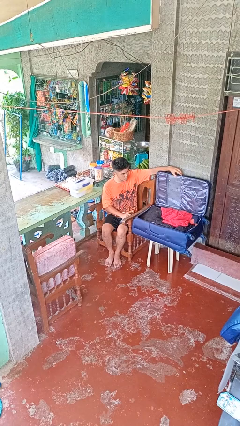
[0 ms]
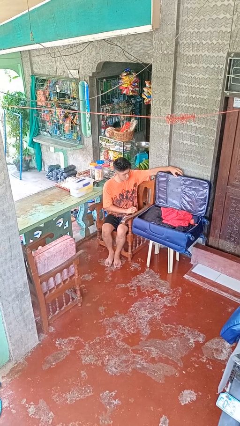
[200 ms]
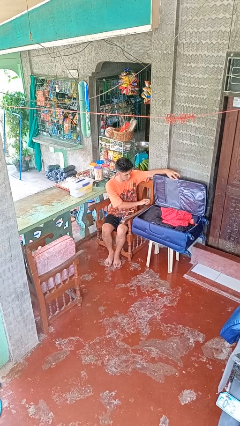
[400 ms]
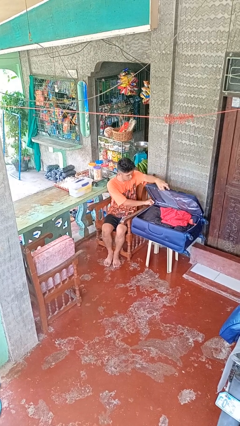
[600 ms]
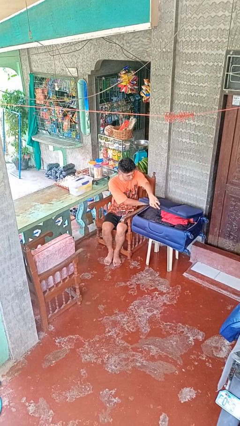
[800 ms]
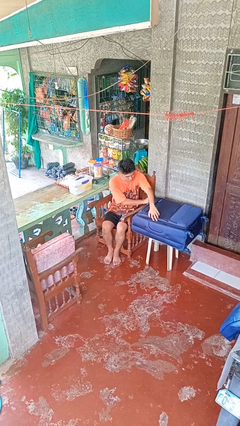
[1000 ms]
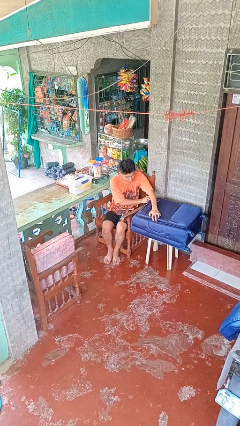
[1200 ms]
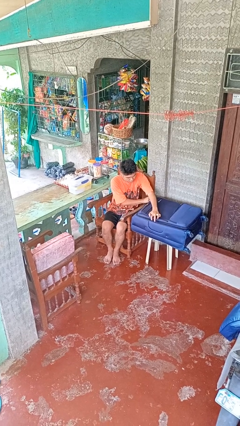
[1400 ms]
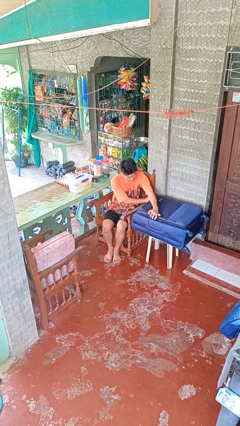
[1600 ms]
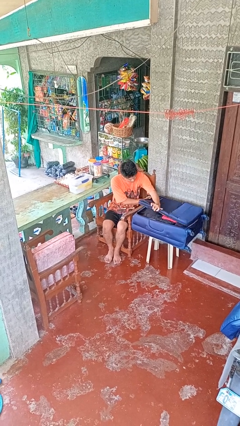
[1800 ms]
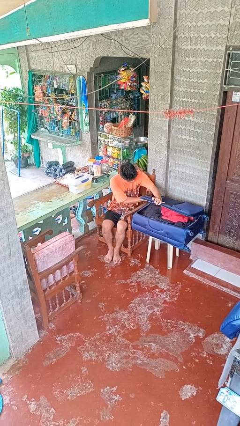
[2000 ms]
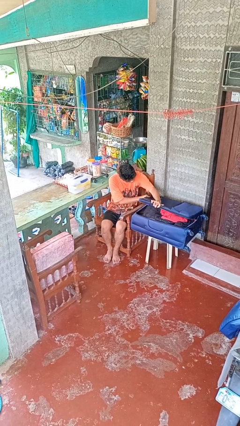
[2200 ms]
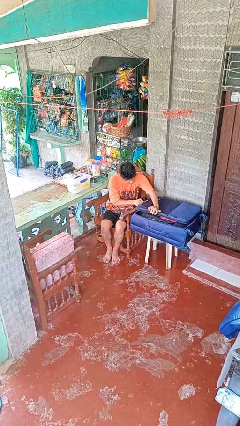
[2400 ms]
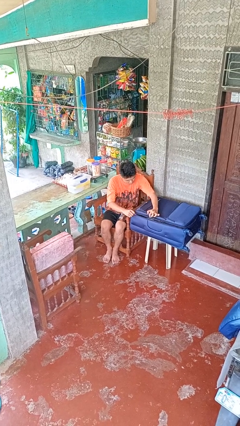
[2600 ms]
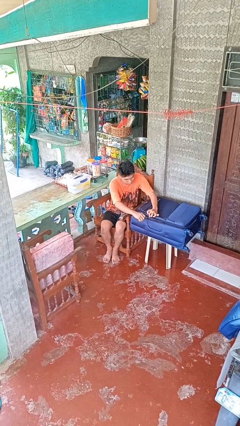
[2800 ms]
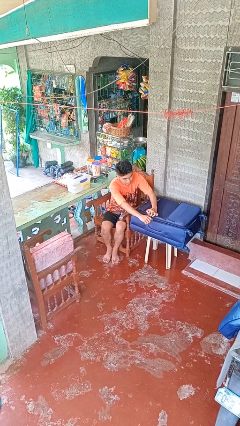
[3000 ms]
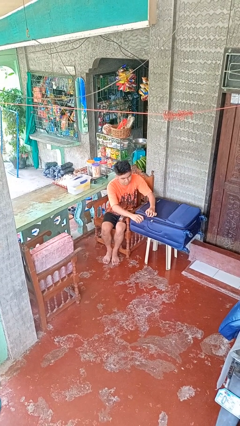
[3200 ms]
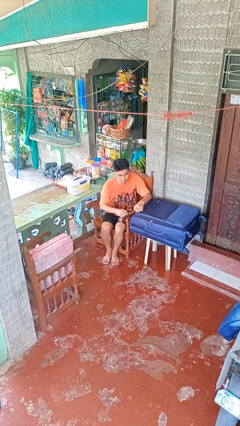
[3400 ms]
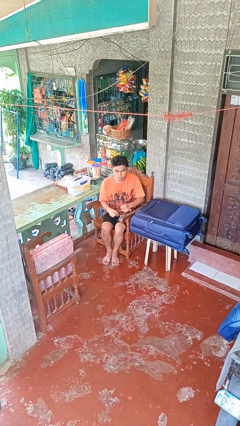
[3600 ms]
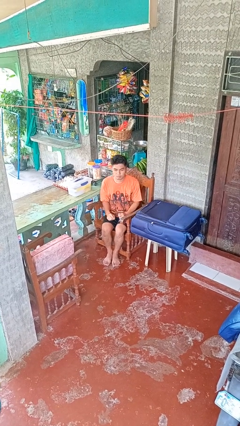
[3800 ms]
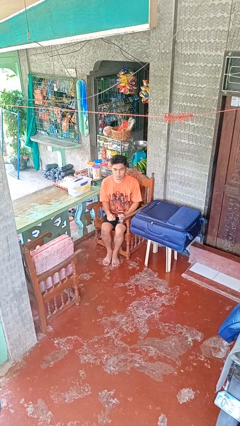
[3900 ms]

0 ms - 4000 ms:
person closes suitcase

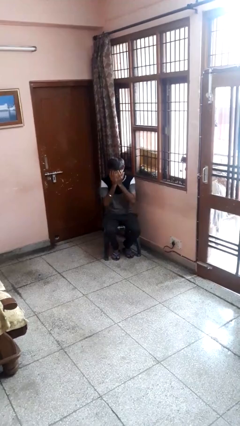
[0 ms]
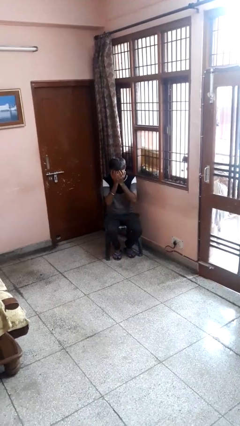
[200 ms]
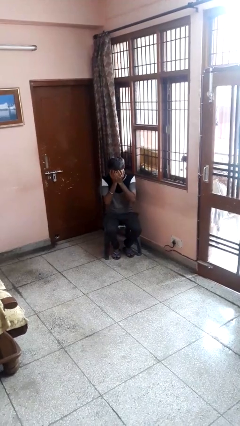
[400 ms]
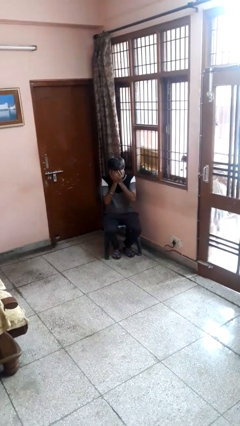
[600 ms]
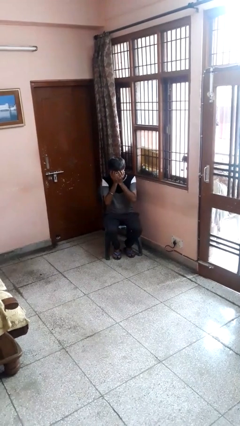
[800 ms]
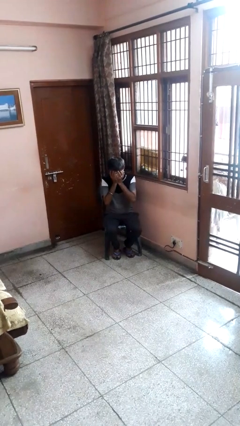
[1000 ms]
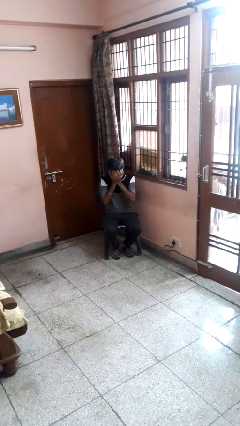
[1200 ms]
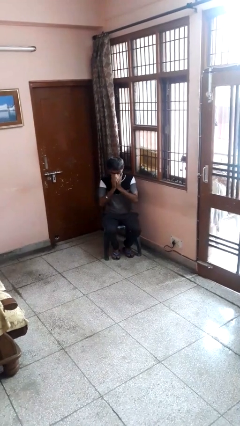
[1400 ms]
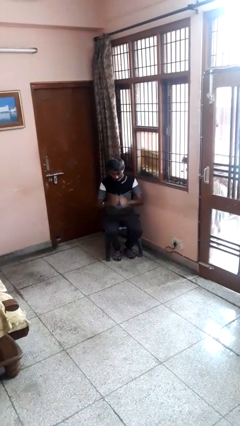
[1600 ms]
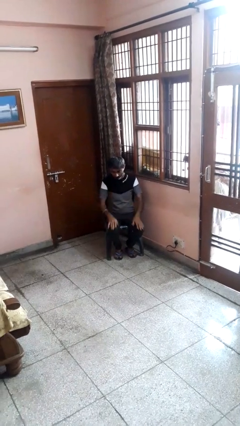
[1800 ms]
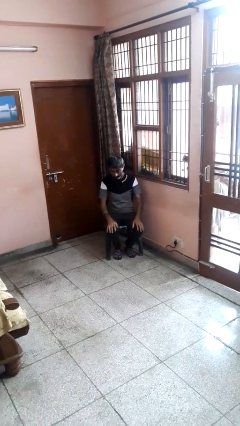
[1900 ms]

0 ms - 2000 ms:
person covers face with hands

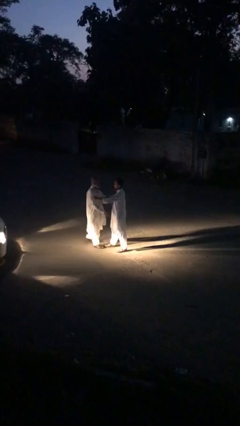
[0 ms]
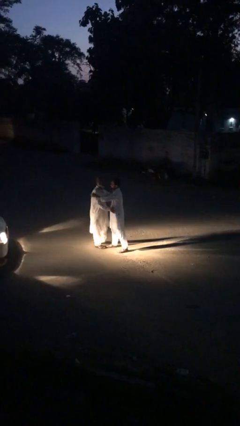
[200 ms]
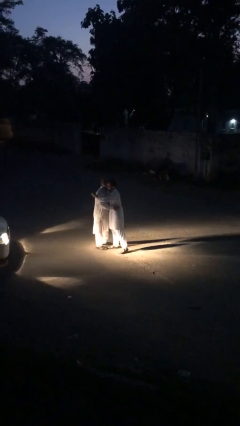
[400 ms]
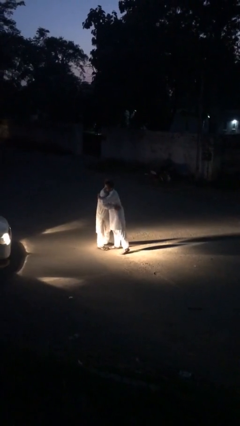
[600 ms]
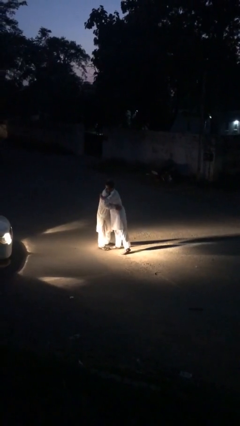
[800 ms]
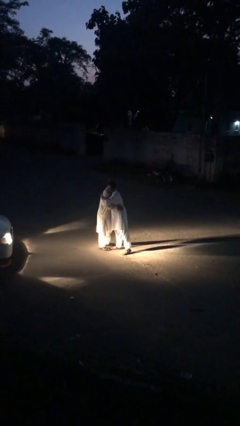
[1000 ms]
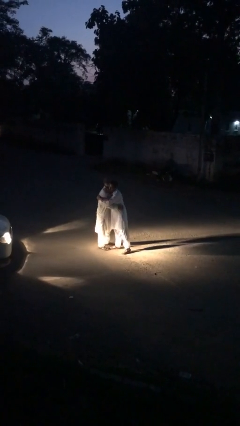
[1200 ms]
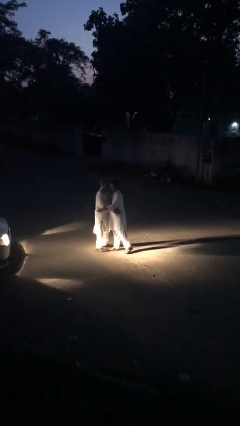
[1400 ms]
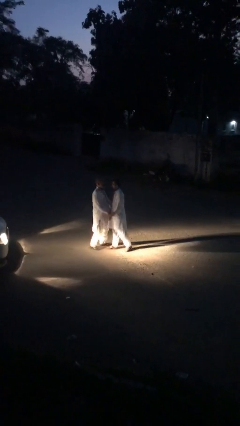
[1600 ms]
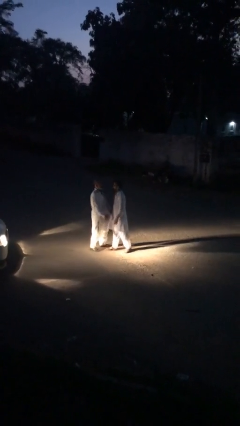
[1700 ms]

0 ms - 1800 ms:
person embraces person

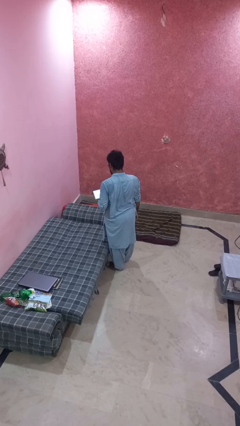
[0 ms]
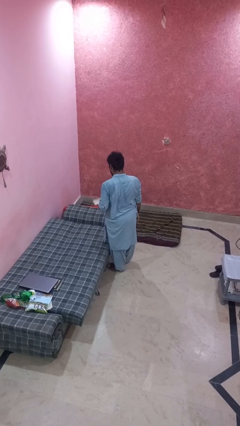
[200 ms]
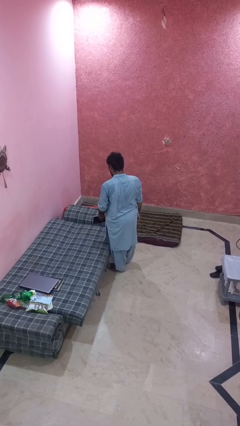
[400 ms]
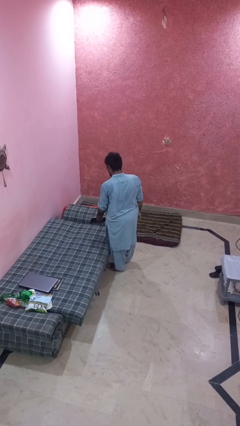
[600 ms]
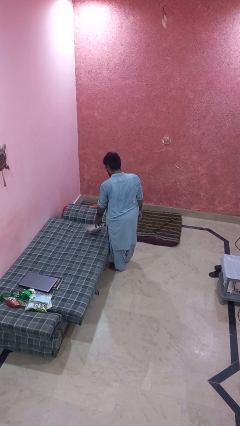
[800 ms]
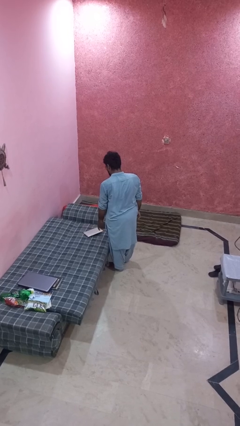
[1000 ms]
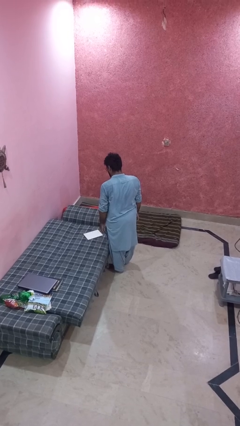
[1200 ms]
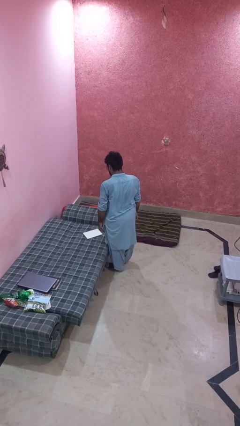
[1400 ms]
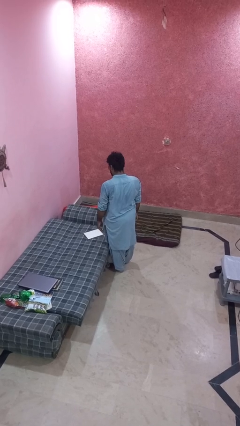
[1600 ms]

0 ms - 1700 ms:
person puts down object on bed

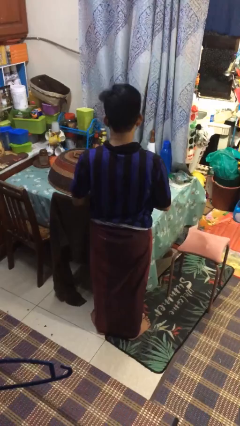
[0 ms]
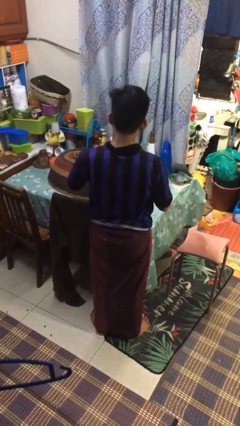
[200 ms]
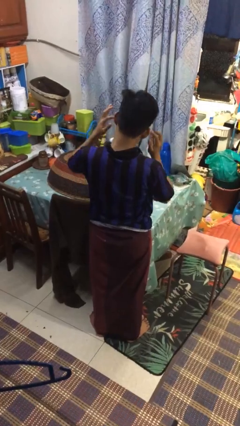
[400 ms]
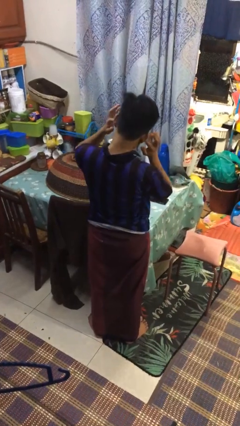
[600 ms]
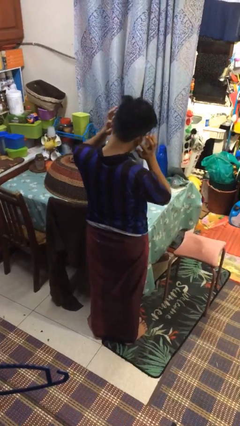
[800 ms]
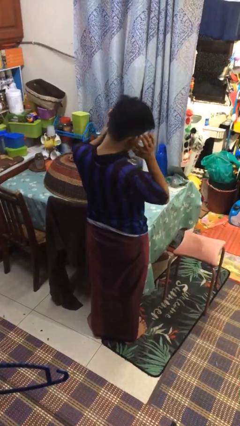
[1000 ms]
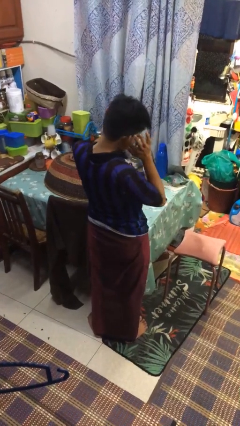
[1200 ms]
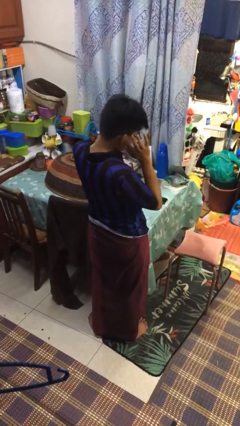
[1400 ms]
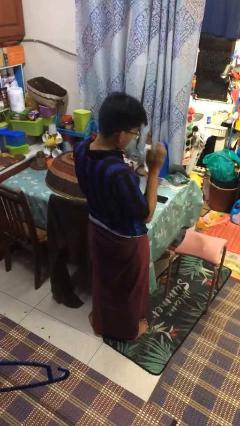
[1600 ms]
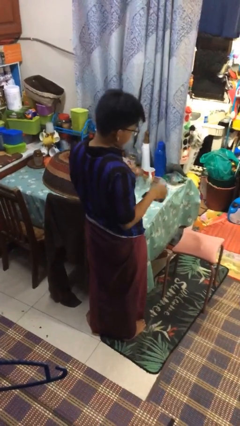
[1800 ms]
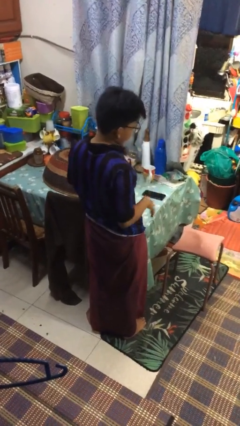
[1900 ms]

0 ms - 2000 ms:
person puts fingers in ear

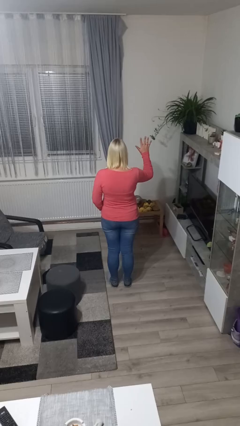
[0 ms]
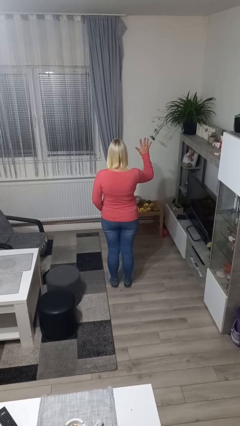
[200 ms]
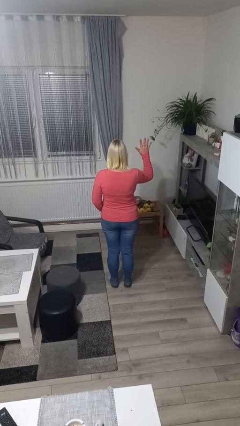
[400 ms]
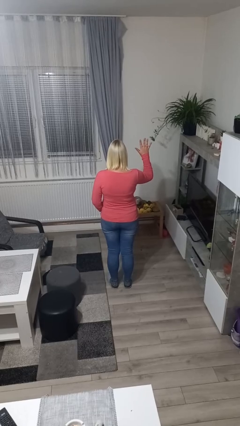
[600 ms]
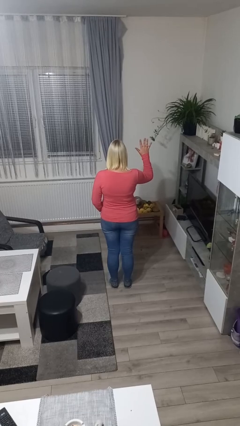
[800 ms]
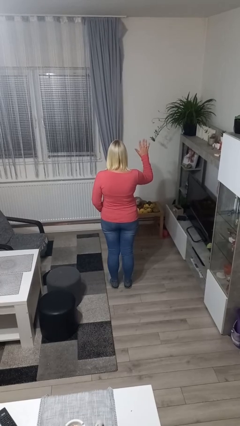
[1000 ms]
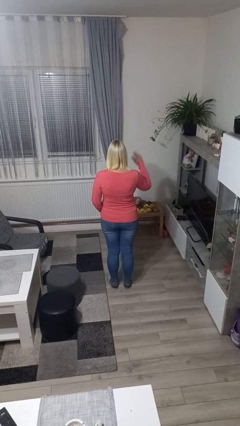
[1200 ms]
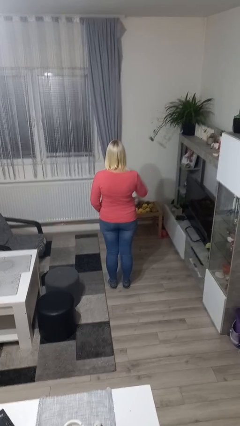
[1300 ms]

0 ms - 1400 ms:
person gestures number five

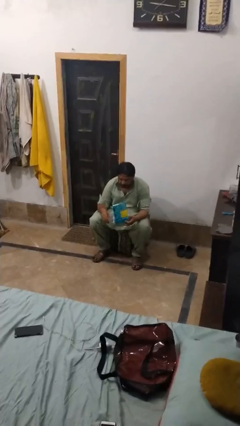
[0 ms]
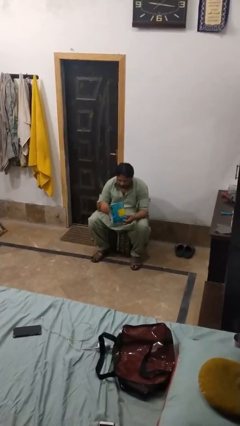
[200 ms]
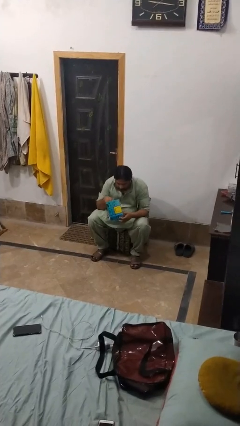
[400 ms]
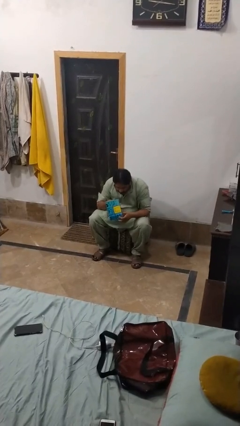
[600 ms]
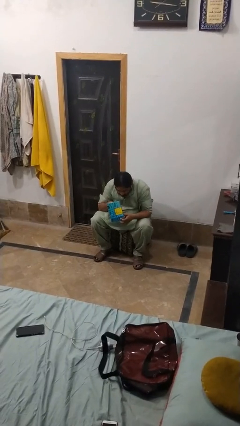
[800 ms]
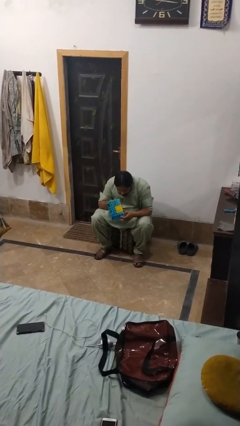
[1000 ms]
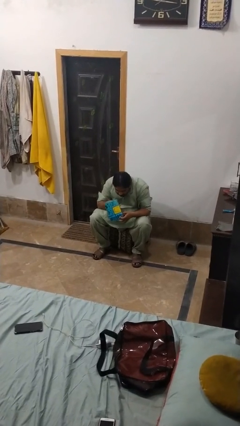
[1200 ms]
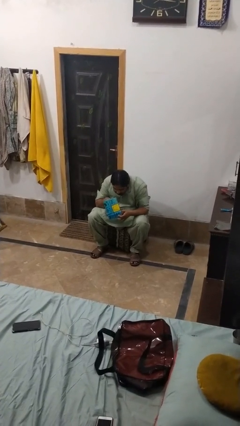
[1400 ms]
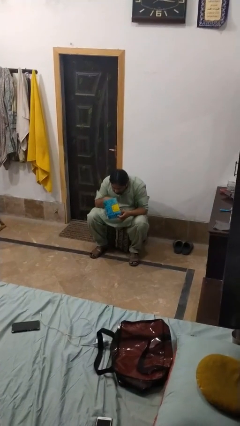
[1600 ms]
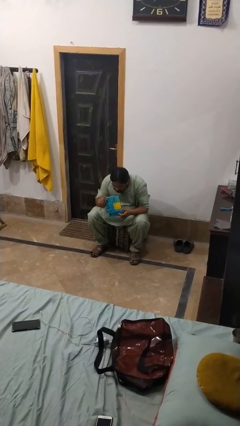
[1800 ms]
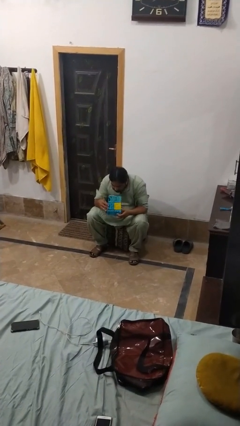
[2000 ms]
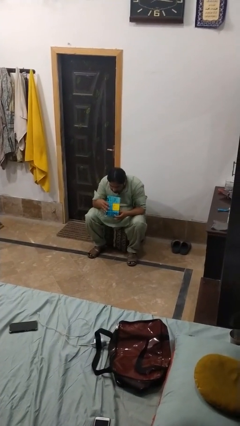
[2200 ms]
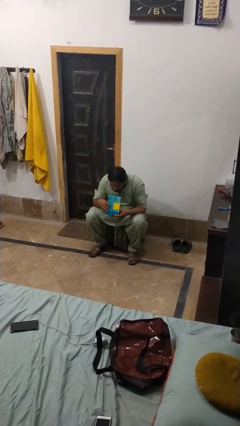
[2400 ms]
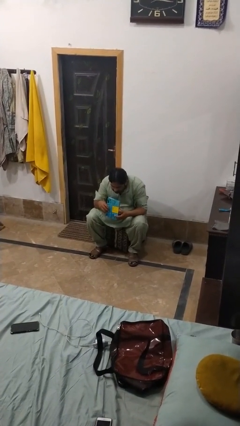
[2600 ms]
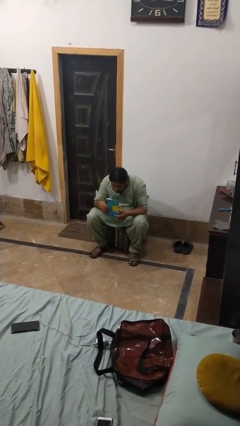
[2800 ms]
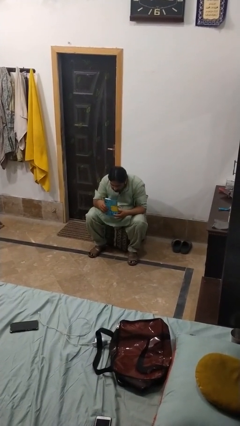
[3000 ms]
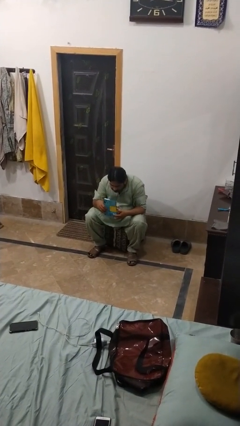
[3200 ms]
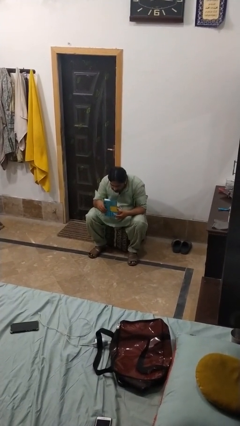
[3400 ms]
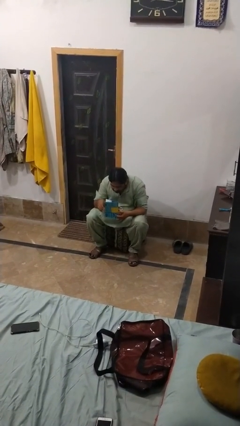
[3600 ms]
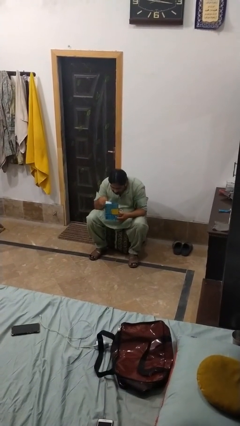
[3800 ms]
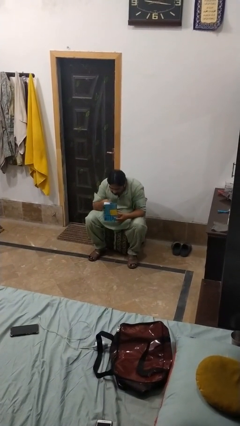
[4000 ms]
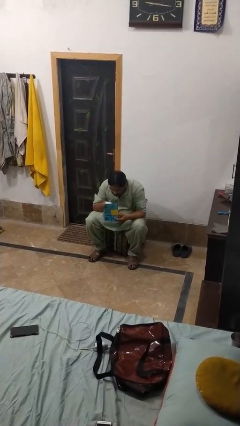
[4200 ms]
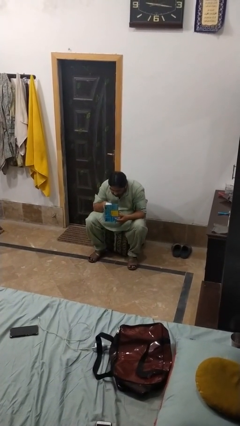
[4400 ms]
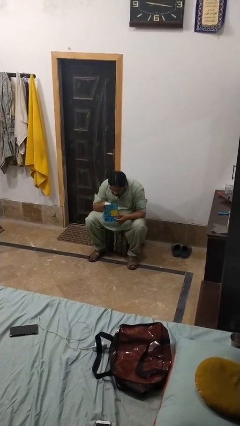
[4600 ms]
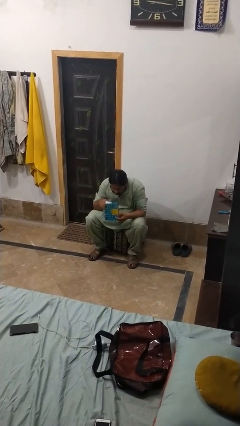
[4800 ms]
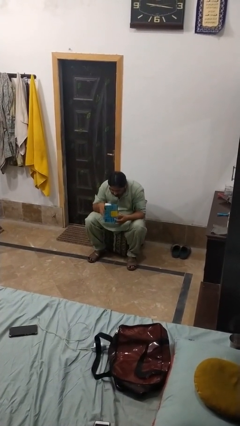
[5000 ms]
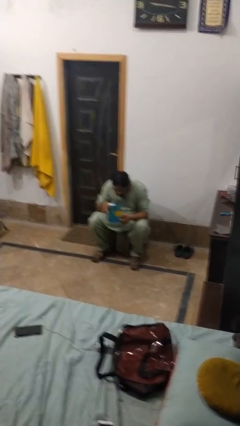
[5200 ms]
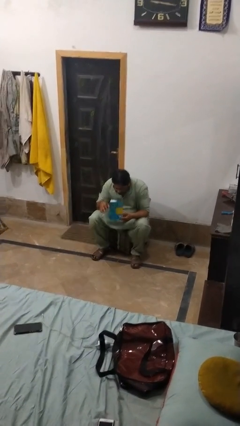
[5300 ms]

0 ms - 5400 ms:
person searches jewelry box
